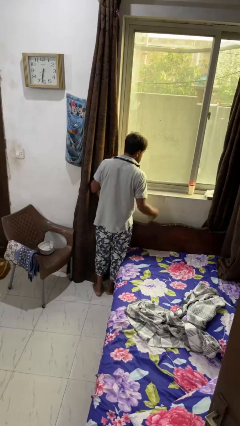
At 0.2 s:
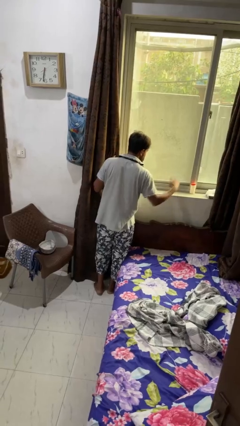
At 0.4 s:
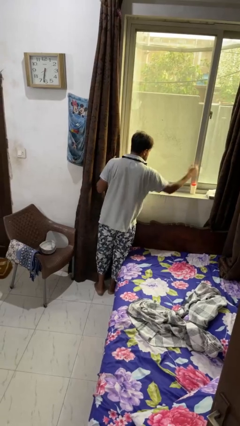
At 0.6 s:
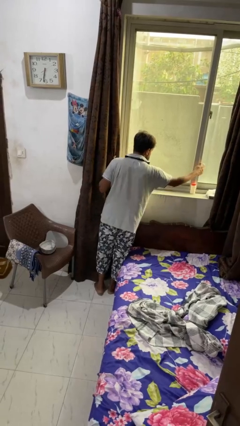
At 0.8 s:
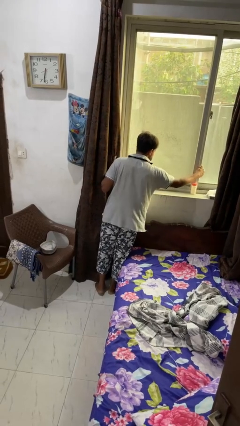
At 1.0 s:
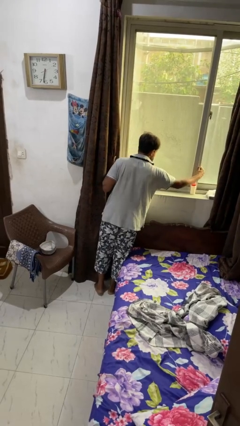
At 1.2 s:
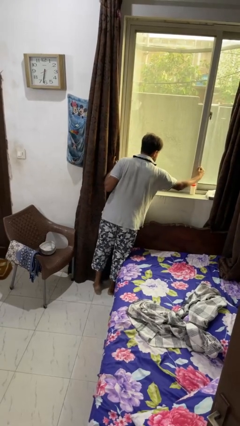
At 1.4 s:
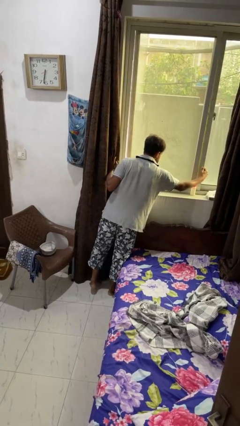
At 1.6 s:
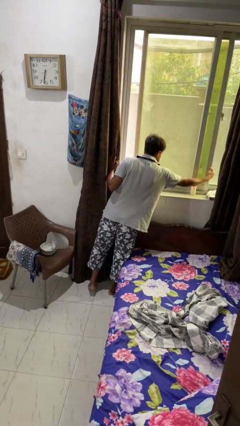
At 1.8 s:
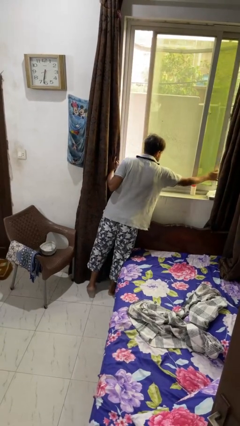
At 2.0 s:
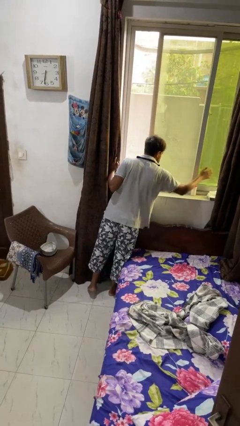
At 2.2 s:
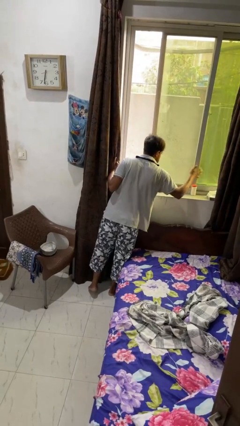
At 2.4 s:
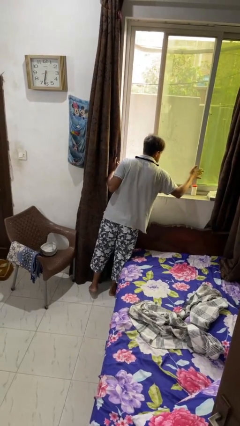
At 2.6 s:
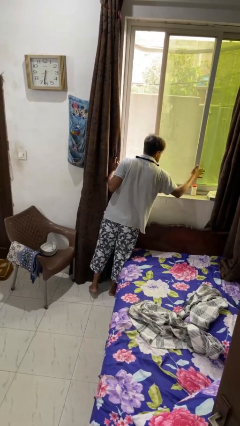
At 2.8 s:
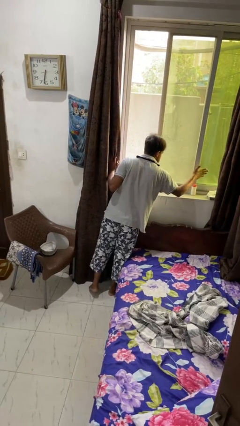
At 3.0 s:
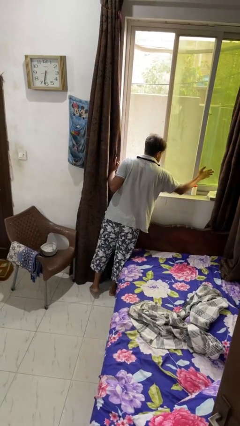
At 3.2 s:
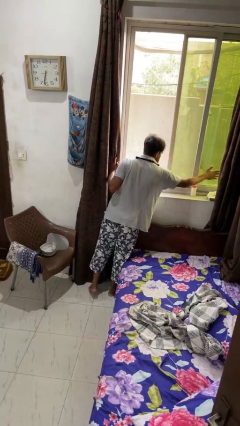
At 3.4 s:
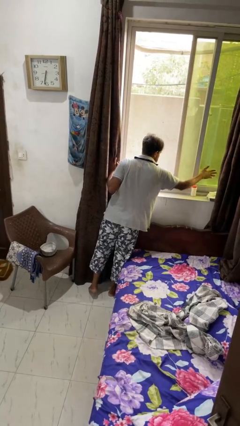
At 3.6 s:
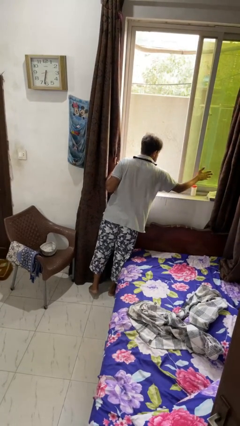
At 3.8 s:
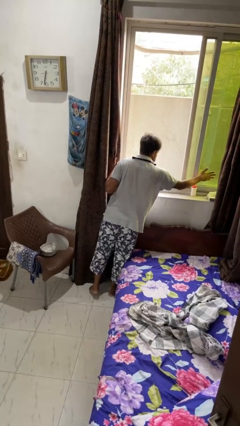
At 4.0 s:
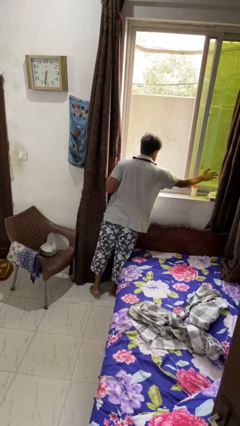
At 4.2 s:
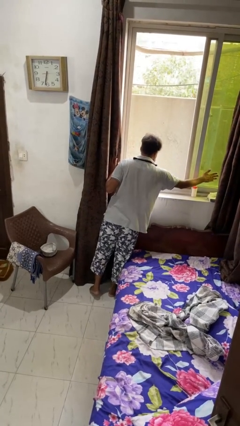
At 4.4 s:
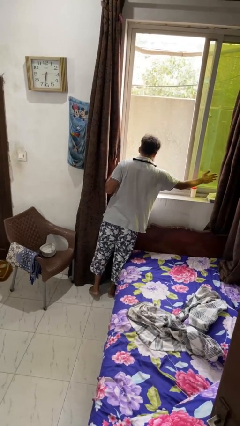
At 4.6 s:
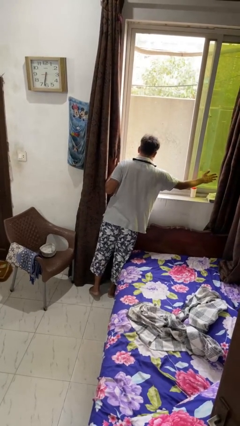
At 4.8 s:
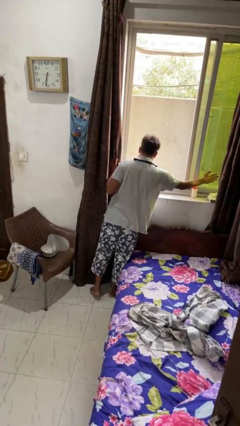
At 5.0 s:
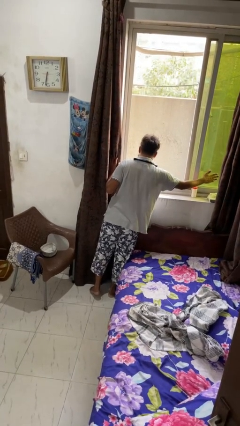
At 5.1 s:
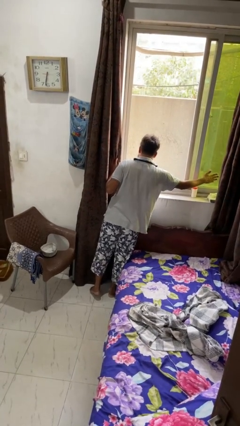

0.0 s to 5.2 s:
person opens home window

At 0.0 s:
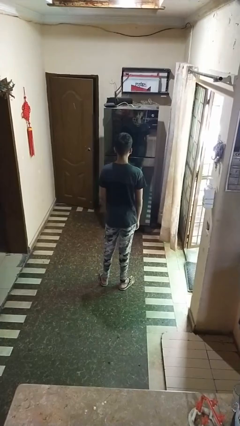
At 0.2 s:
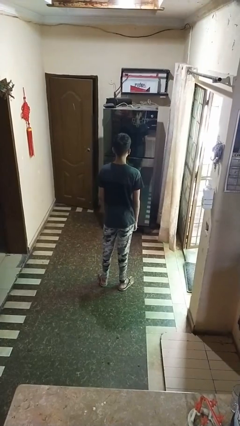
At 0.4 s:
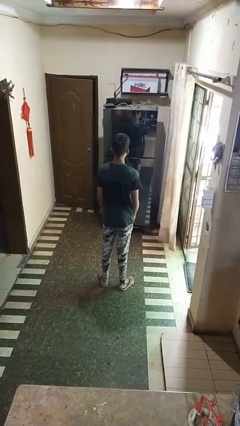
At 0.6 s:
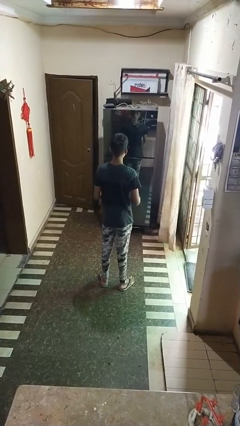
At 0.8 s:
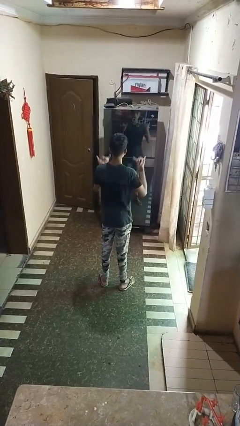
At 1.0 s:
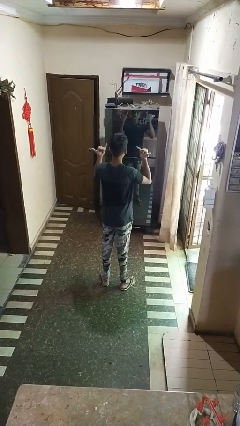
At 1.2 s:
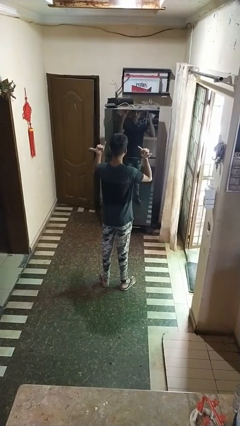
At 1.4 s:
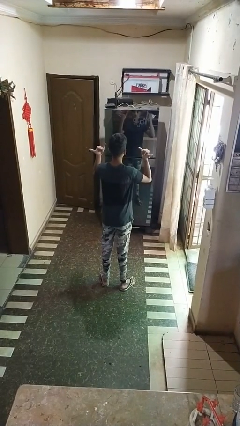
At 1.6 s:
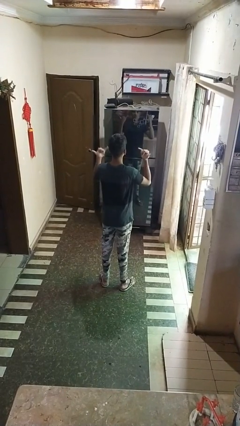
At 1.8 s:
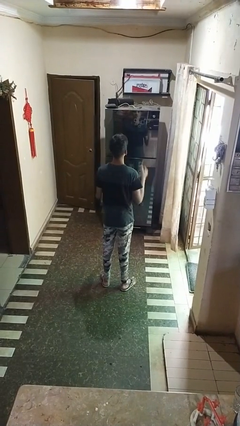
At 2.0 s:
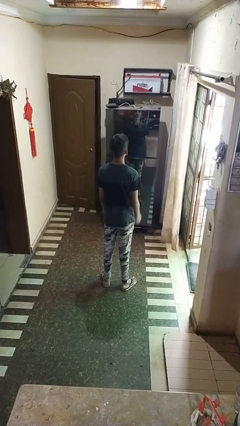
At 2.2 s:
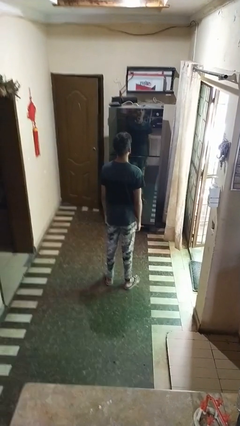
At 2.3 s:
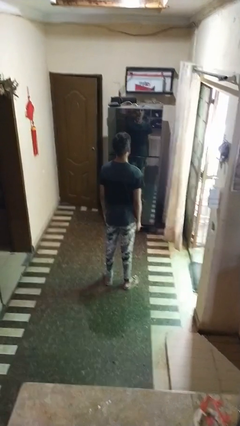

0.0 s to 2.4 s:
person gestures hang loose

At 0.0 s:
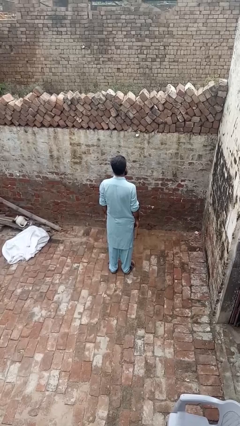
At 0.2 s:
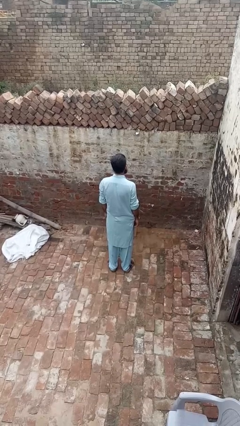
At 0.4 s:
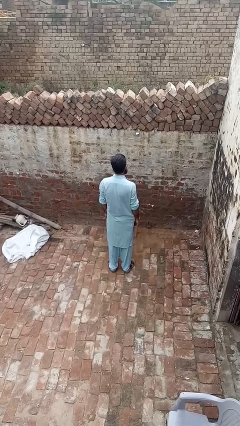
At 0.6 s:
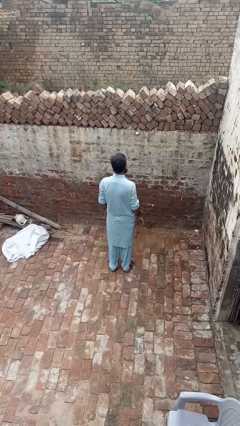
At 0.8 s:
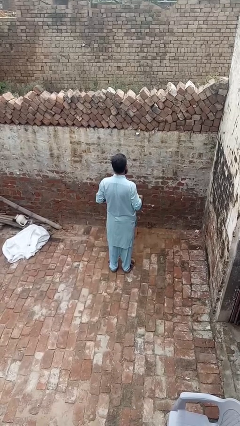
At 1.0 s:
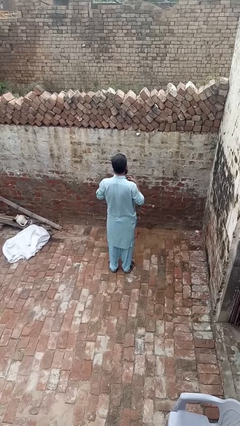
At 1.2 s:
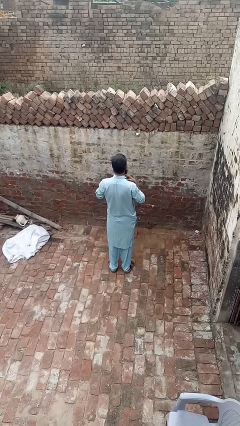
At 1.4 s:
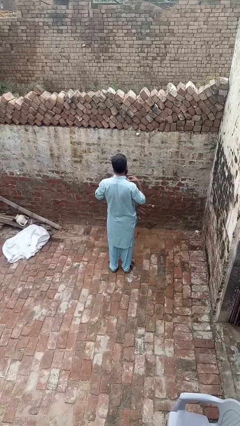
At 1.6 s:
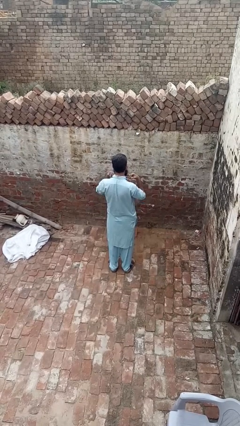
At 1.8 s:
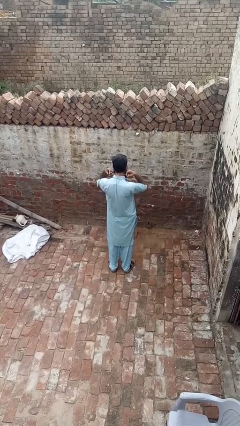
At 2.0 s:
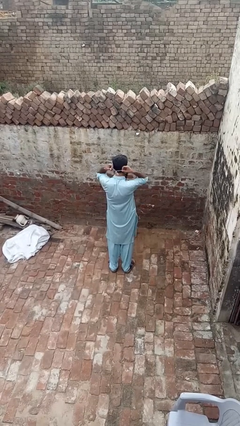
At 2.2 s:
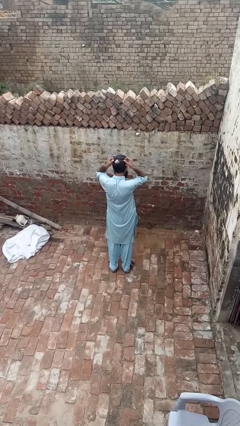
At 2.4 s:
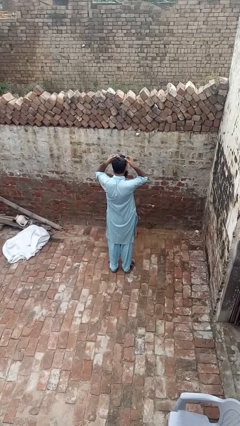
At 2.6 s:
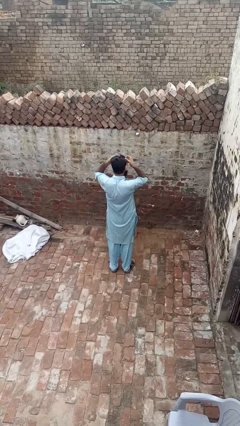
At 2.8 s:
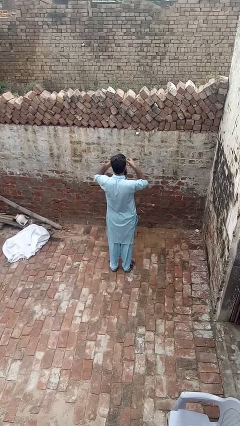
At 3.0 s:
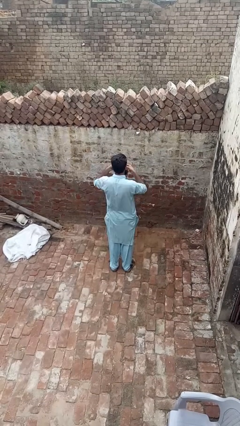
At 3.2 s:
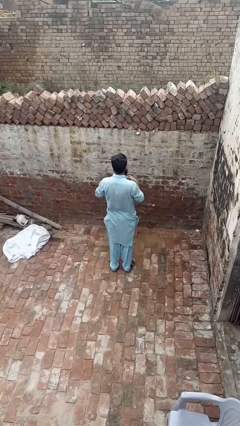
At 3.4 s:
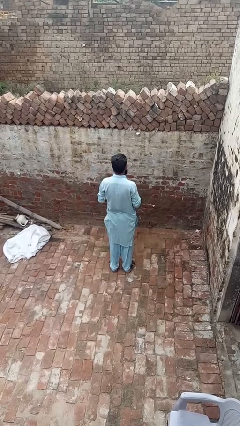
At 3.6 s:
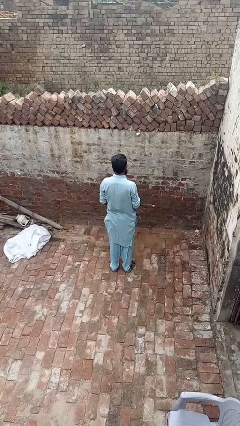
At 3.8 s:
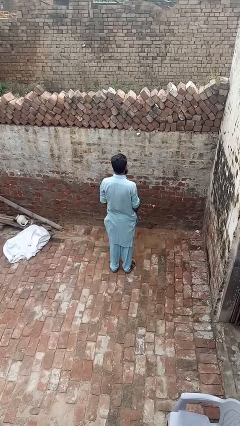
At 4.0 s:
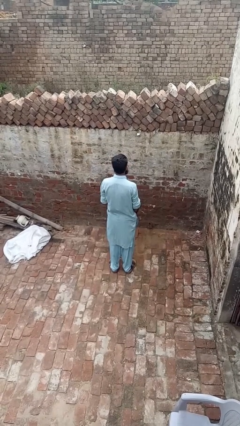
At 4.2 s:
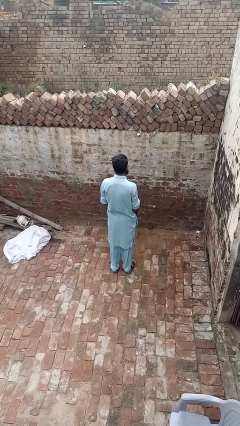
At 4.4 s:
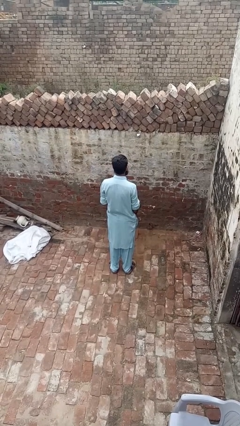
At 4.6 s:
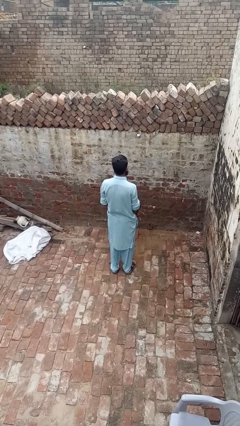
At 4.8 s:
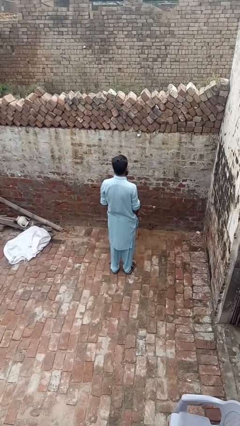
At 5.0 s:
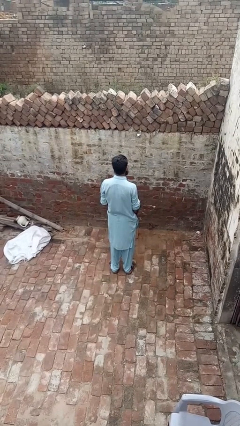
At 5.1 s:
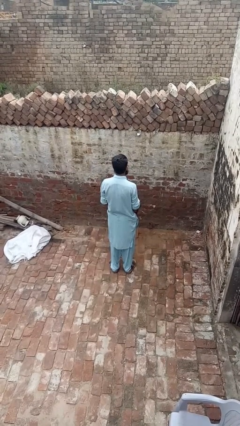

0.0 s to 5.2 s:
person takes off necklace

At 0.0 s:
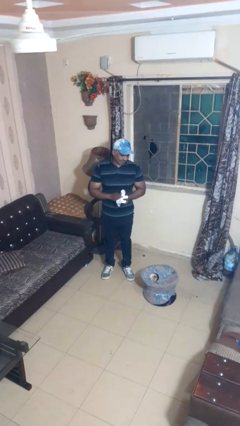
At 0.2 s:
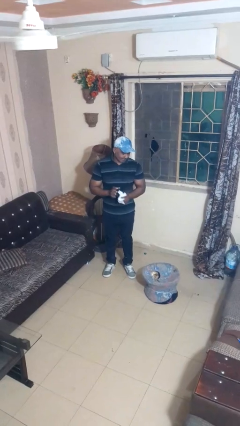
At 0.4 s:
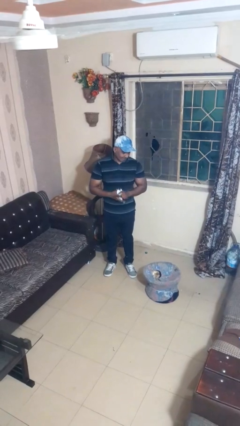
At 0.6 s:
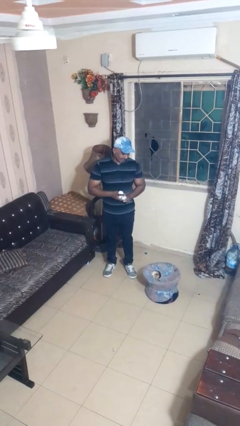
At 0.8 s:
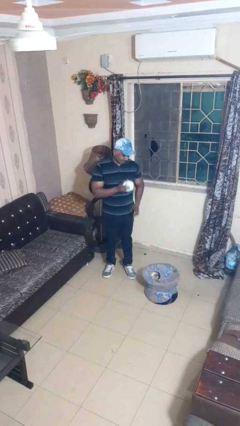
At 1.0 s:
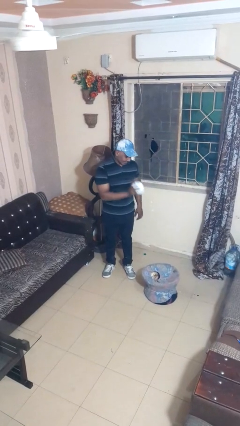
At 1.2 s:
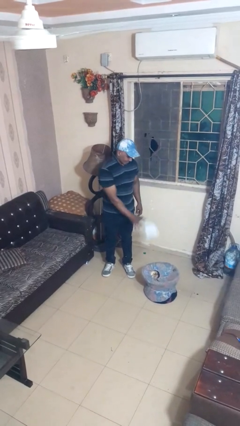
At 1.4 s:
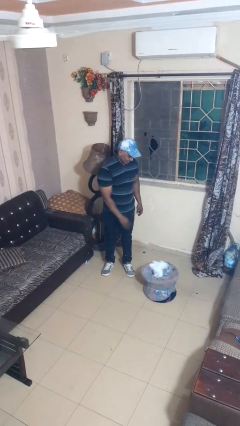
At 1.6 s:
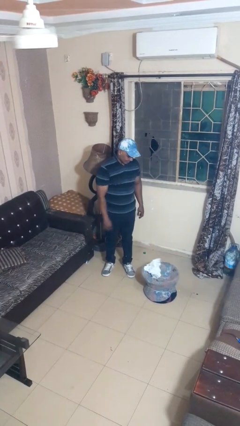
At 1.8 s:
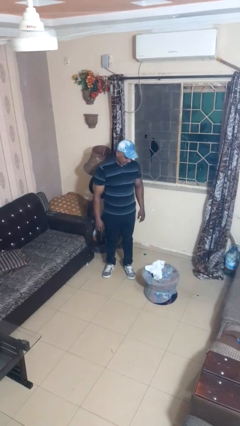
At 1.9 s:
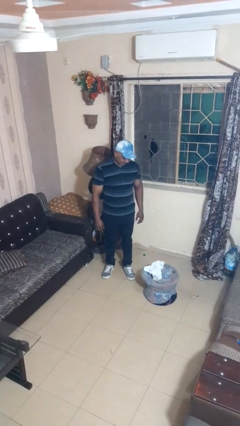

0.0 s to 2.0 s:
person puts object into basket

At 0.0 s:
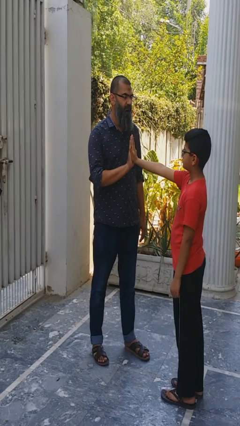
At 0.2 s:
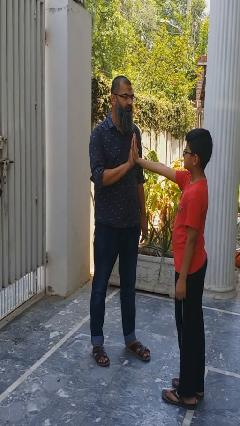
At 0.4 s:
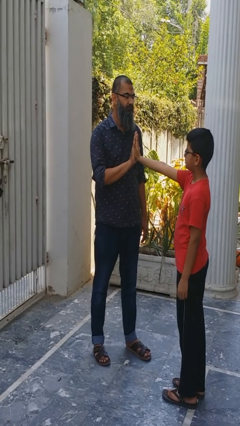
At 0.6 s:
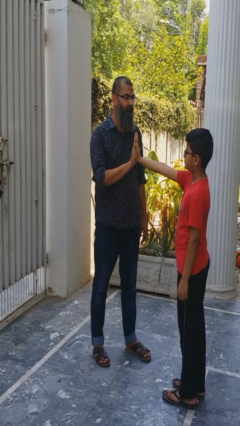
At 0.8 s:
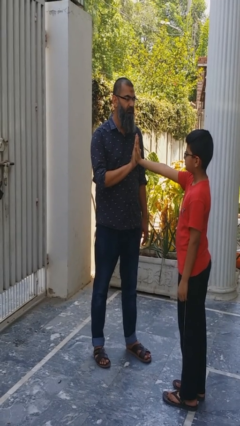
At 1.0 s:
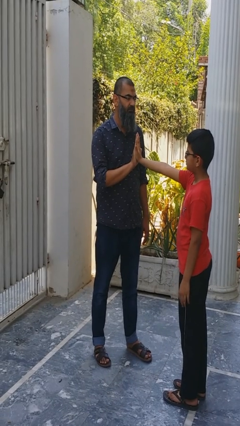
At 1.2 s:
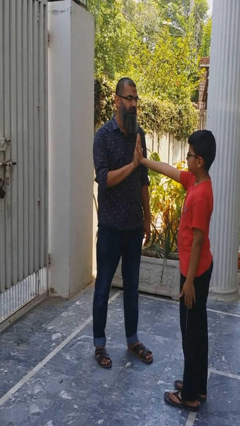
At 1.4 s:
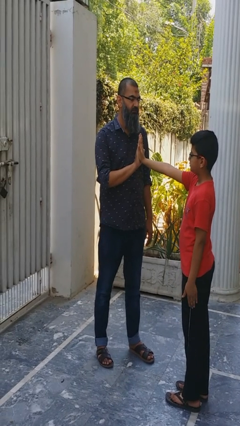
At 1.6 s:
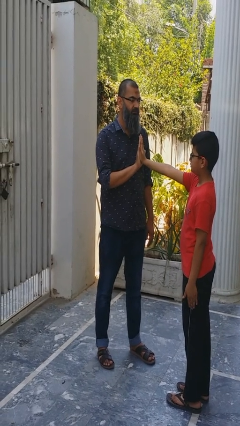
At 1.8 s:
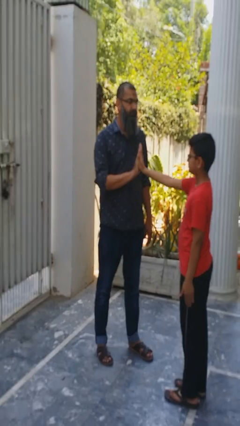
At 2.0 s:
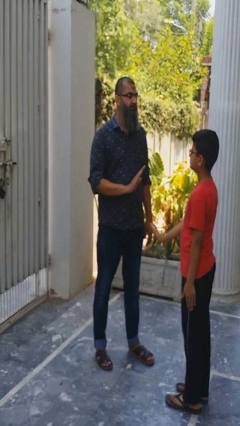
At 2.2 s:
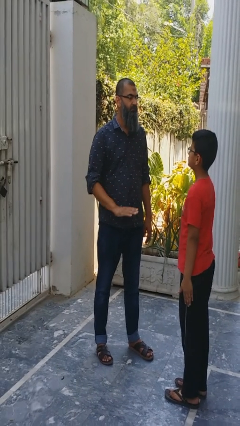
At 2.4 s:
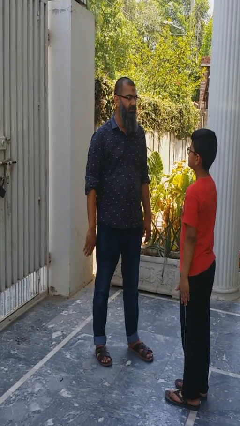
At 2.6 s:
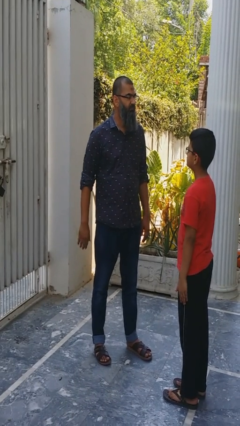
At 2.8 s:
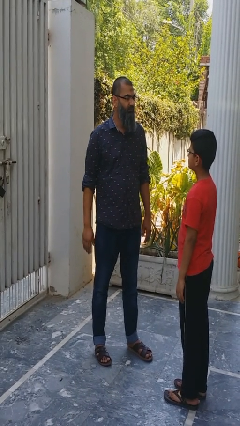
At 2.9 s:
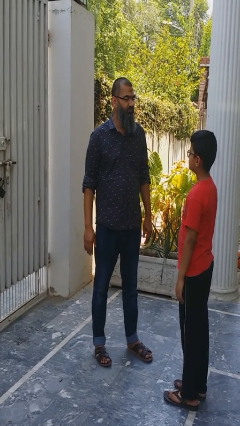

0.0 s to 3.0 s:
person highfives hand
